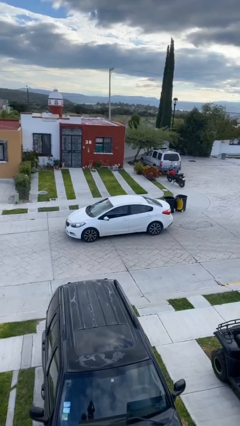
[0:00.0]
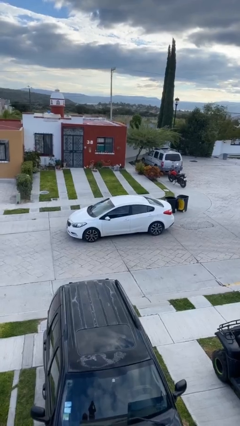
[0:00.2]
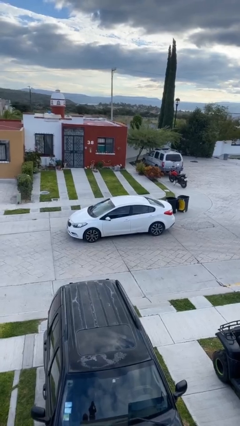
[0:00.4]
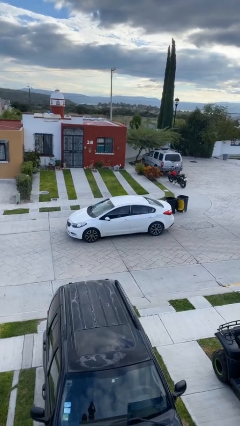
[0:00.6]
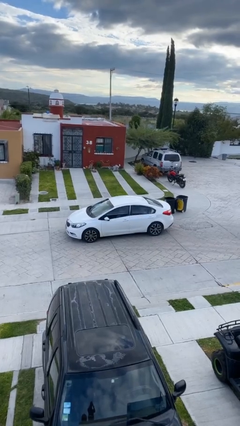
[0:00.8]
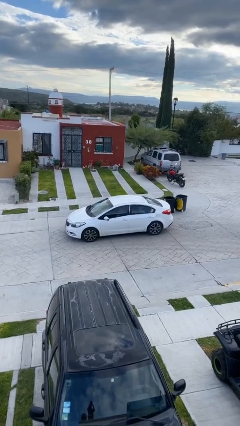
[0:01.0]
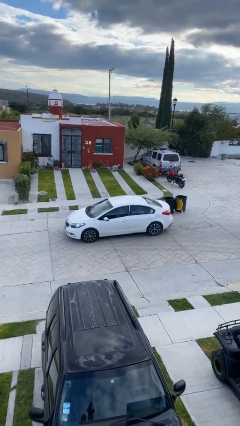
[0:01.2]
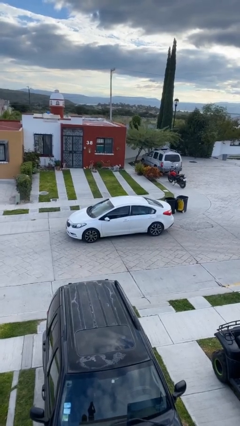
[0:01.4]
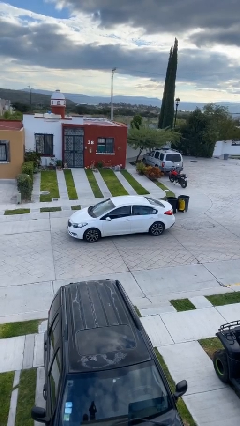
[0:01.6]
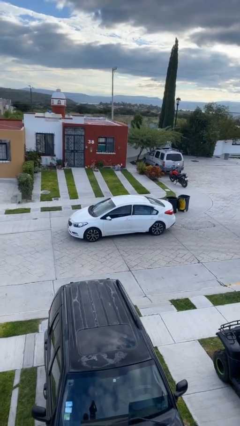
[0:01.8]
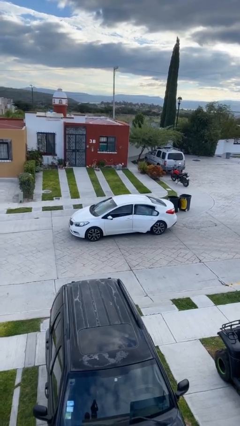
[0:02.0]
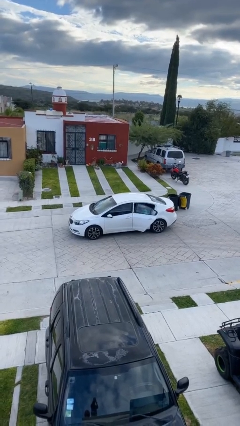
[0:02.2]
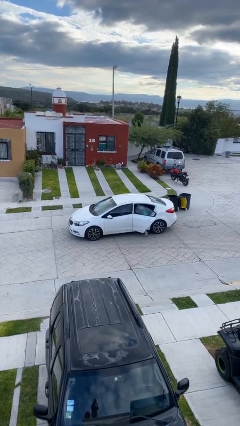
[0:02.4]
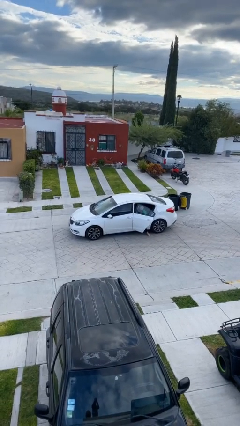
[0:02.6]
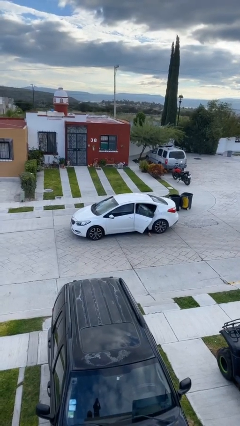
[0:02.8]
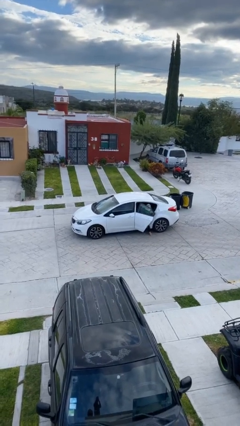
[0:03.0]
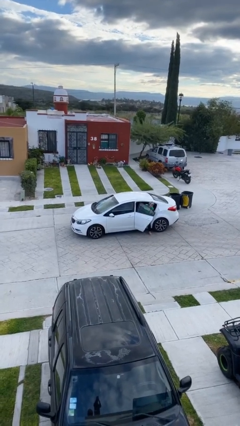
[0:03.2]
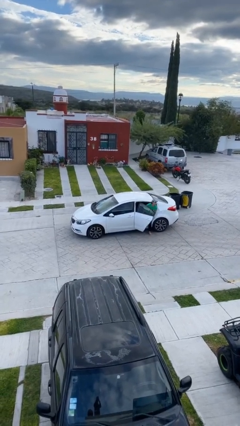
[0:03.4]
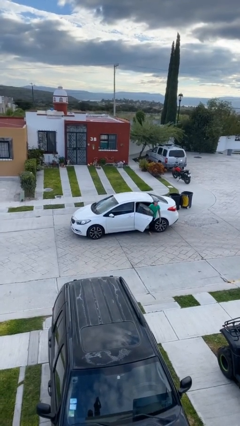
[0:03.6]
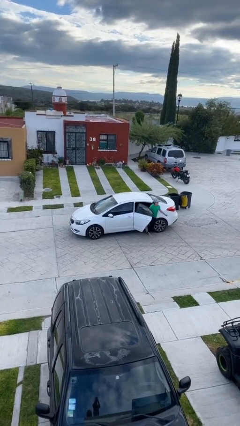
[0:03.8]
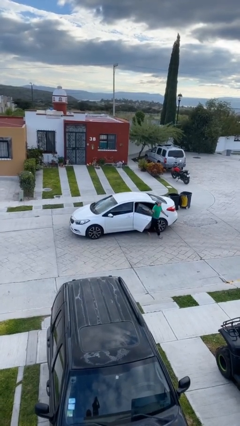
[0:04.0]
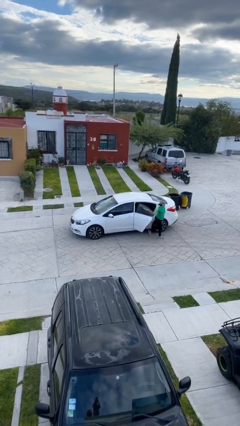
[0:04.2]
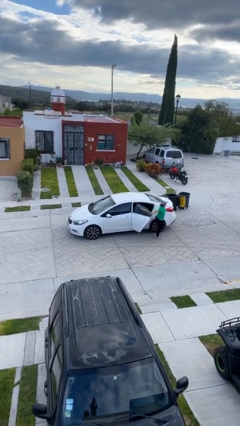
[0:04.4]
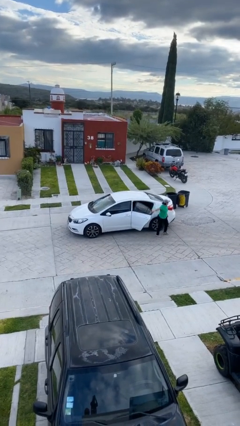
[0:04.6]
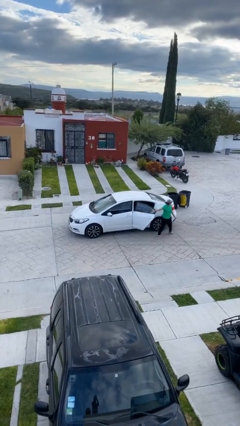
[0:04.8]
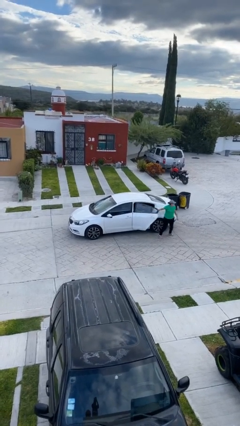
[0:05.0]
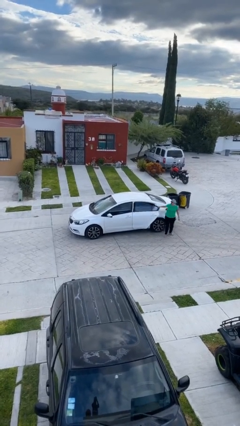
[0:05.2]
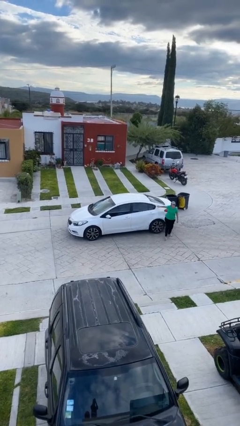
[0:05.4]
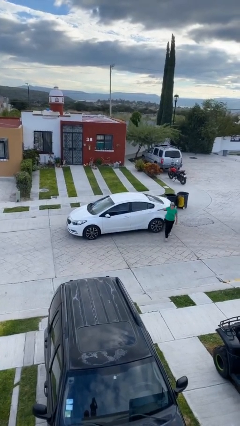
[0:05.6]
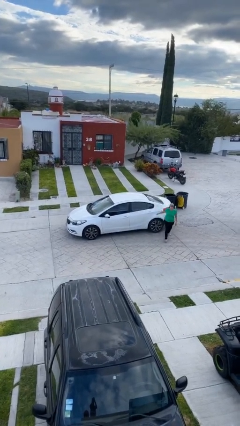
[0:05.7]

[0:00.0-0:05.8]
car drops off person

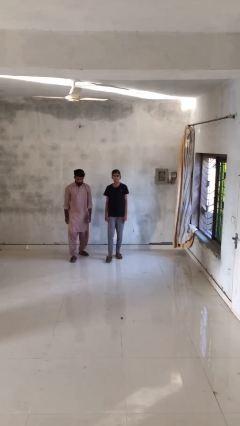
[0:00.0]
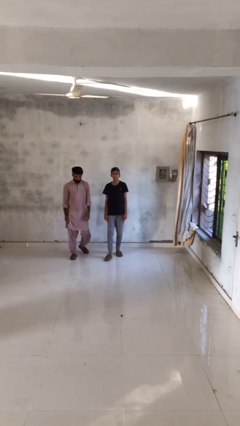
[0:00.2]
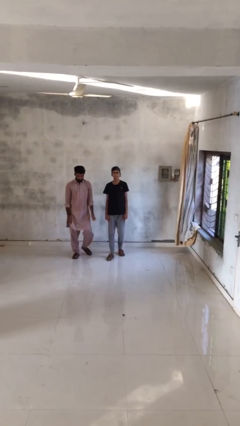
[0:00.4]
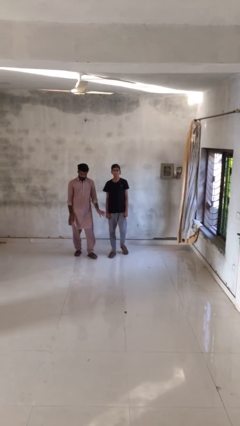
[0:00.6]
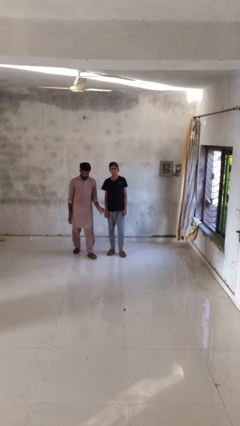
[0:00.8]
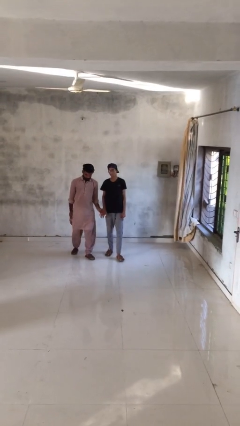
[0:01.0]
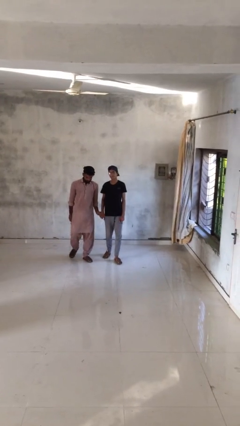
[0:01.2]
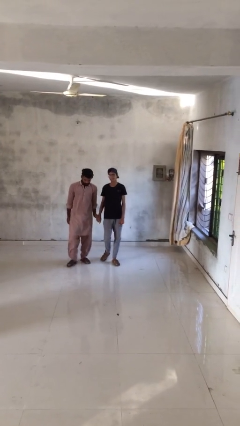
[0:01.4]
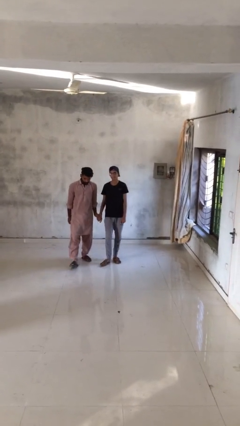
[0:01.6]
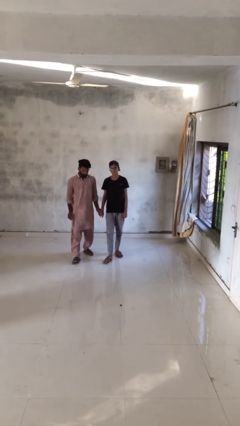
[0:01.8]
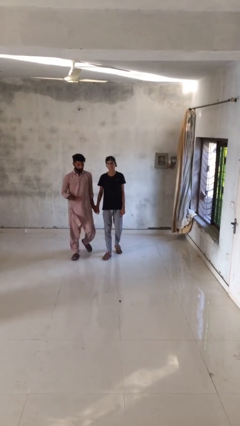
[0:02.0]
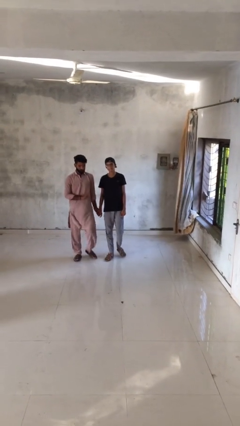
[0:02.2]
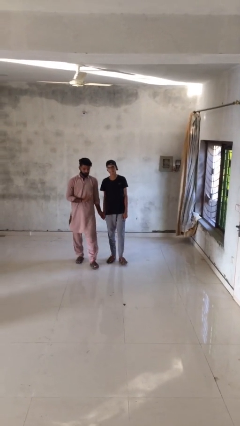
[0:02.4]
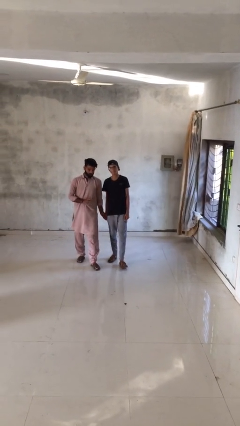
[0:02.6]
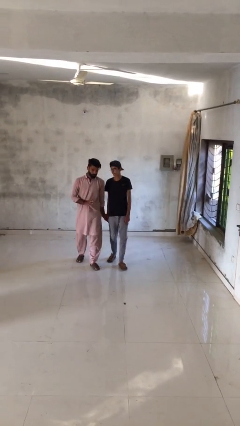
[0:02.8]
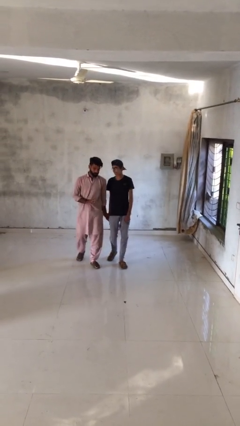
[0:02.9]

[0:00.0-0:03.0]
person holds hand

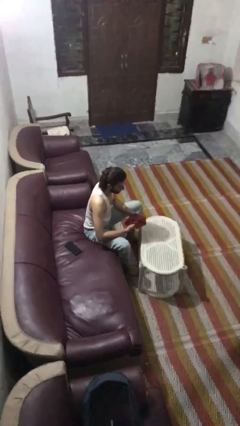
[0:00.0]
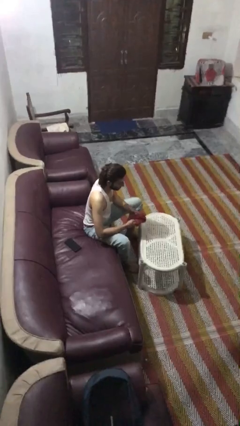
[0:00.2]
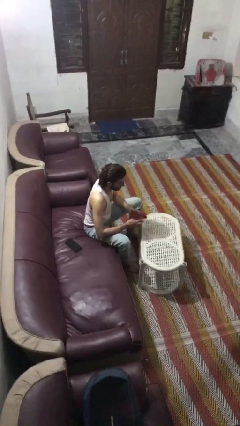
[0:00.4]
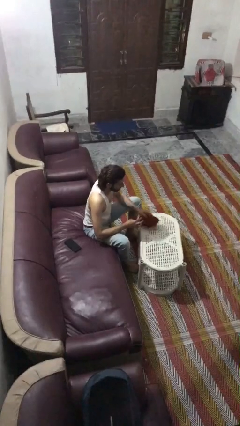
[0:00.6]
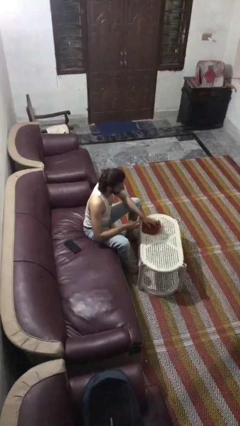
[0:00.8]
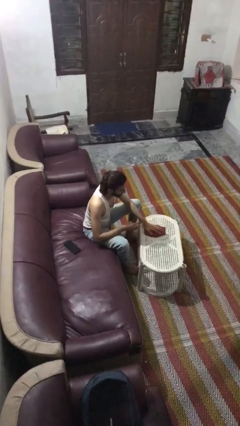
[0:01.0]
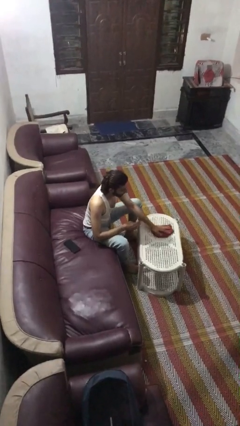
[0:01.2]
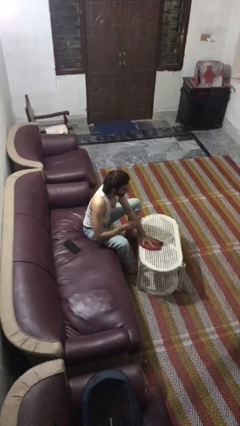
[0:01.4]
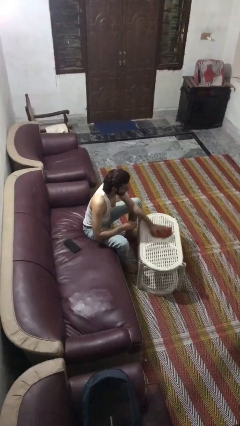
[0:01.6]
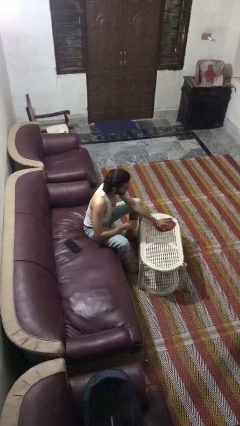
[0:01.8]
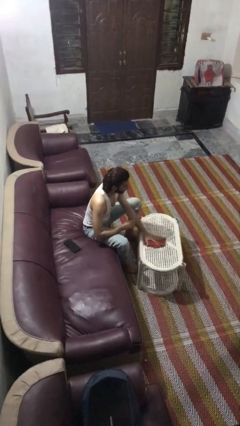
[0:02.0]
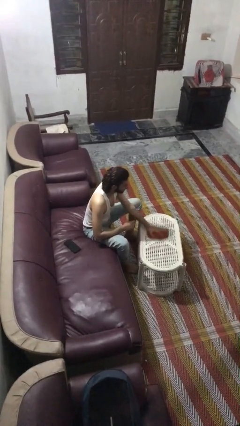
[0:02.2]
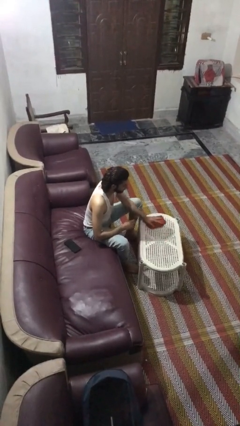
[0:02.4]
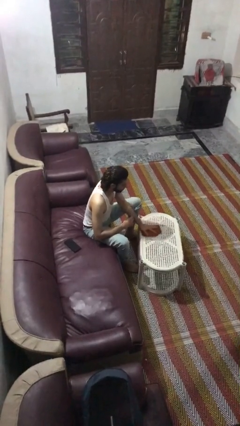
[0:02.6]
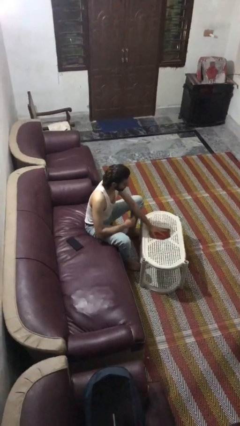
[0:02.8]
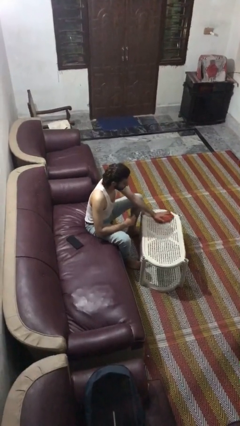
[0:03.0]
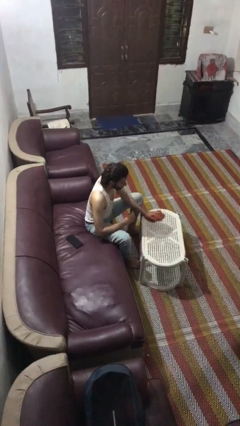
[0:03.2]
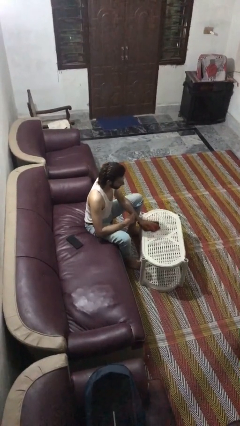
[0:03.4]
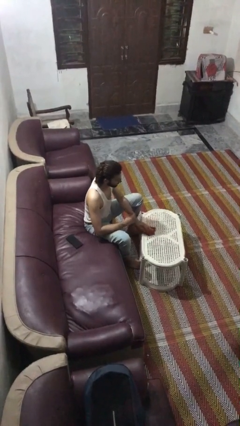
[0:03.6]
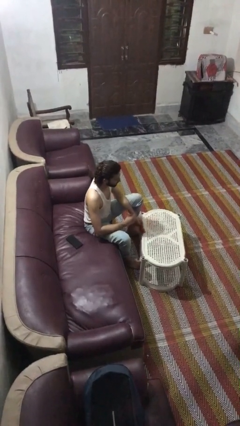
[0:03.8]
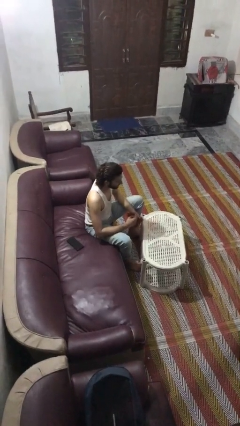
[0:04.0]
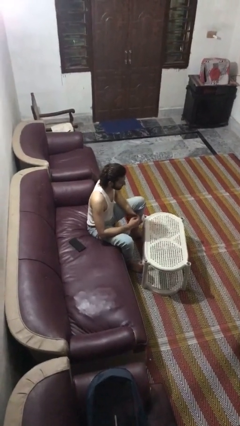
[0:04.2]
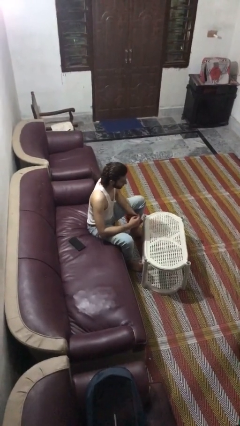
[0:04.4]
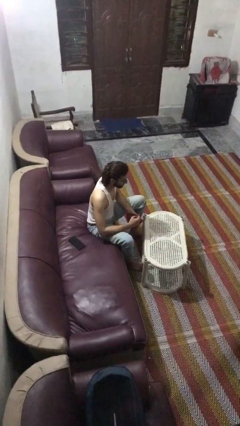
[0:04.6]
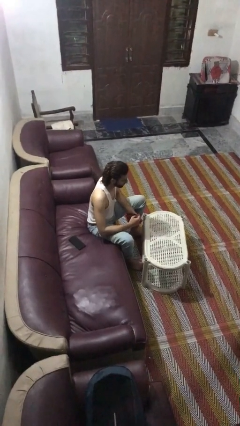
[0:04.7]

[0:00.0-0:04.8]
person cleans table with rag

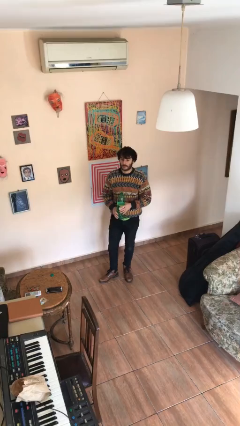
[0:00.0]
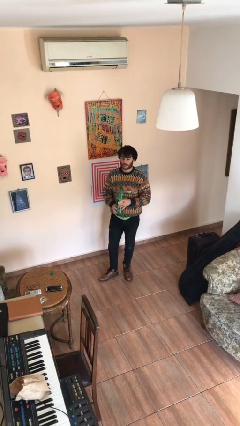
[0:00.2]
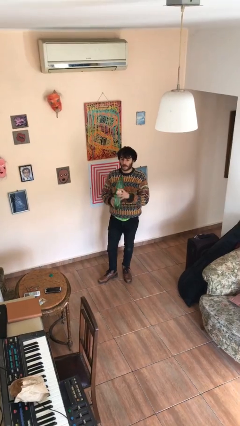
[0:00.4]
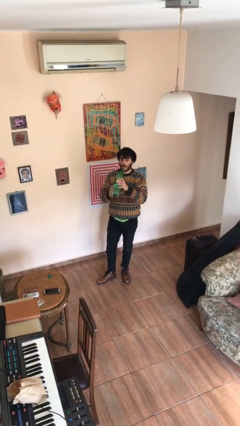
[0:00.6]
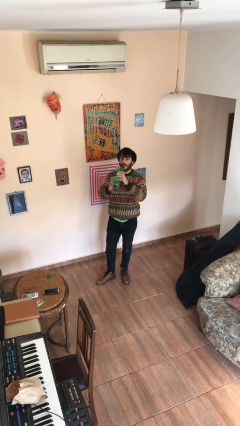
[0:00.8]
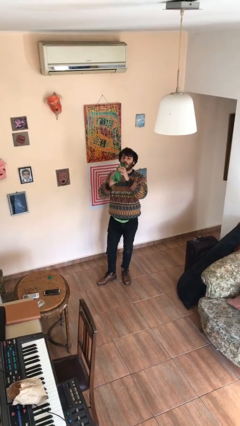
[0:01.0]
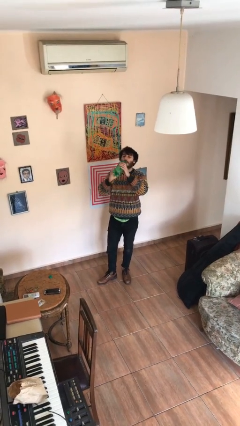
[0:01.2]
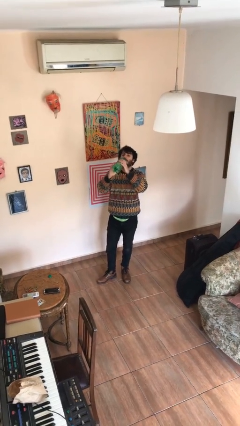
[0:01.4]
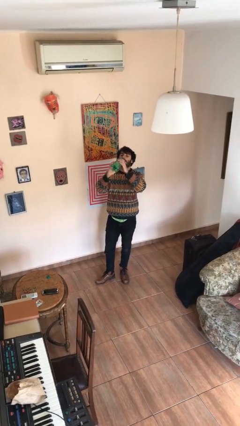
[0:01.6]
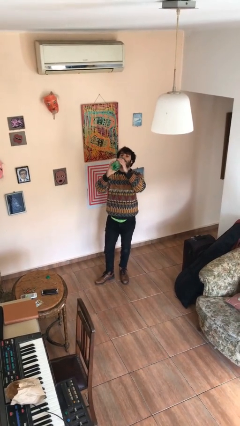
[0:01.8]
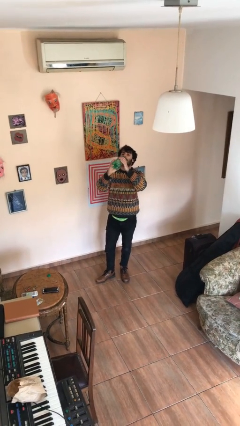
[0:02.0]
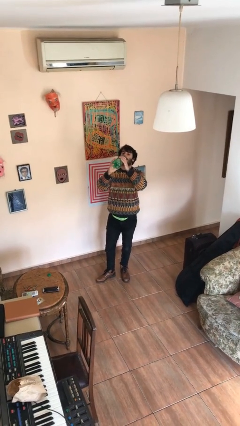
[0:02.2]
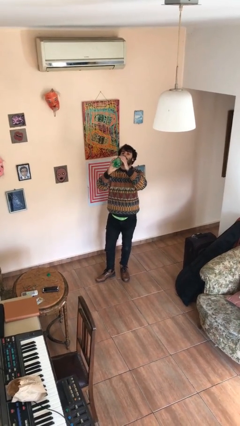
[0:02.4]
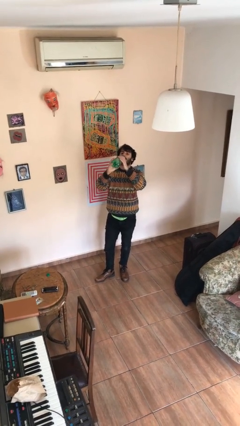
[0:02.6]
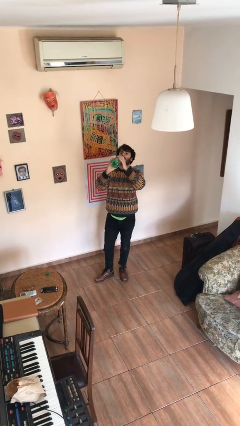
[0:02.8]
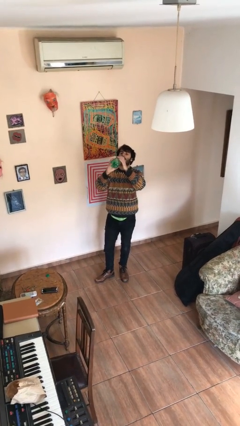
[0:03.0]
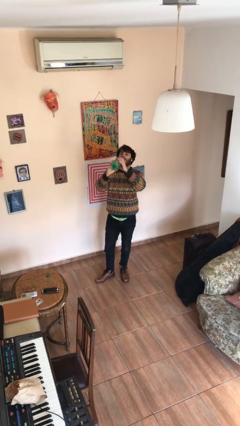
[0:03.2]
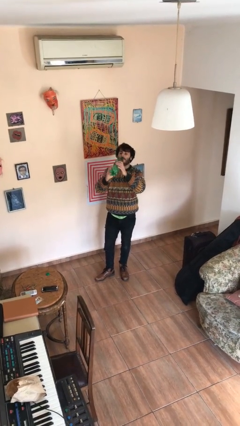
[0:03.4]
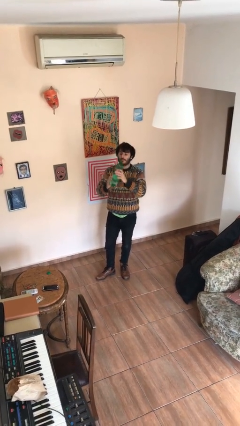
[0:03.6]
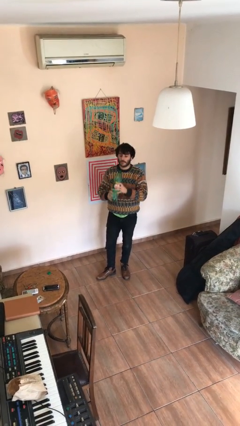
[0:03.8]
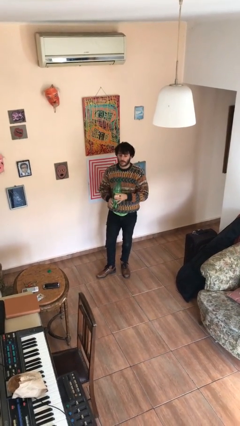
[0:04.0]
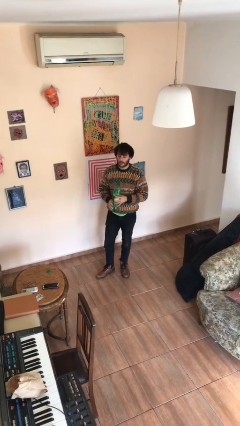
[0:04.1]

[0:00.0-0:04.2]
person drinks from bottle
